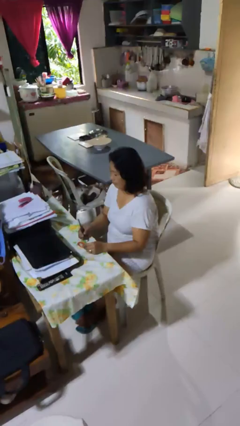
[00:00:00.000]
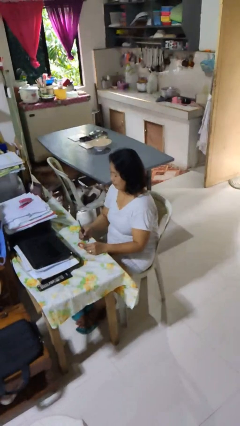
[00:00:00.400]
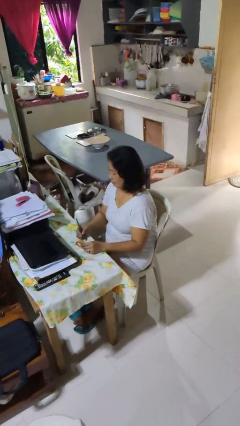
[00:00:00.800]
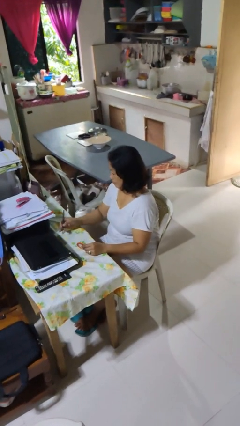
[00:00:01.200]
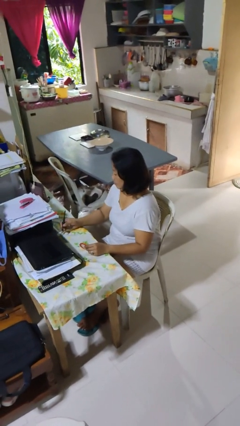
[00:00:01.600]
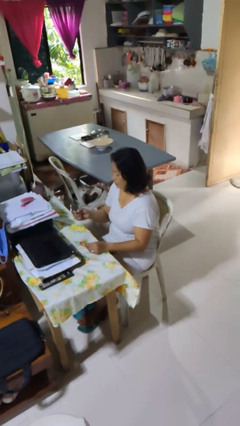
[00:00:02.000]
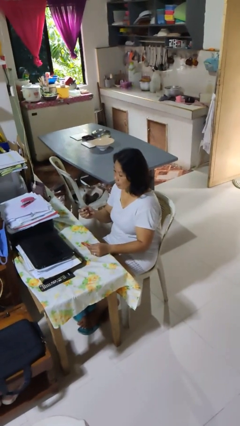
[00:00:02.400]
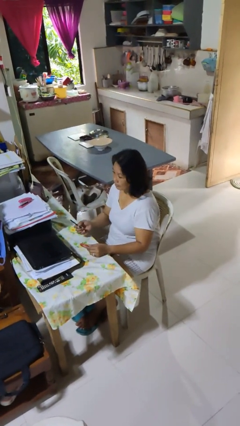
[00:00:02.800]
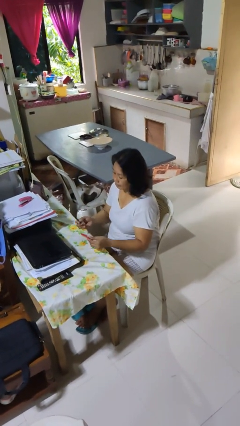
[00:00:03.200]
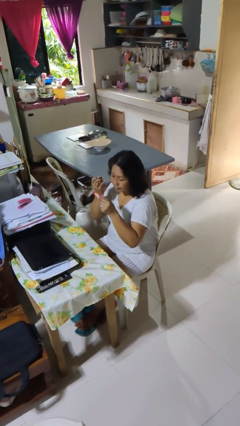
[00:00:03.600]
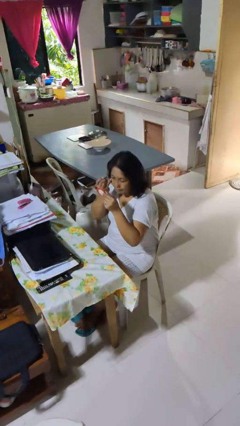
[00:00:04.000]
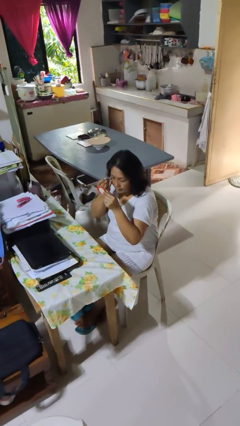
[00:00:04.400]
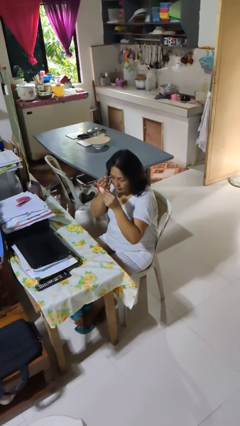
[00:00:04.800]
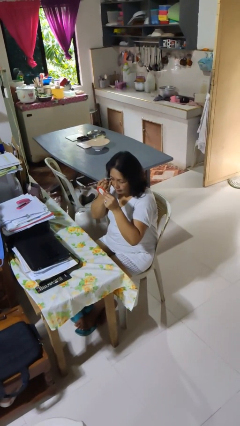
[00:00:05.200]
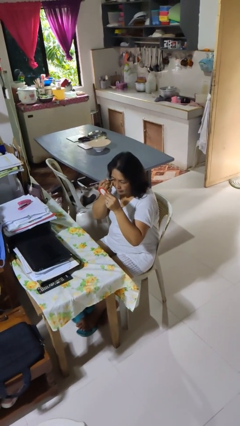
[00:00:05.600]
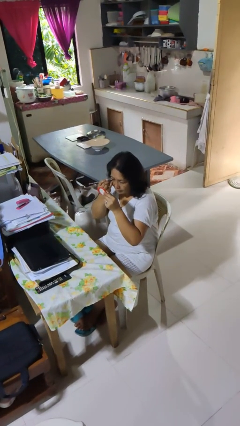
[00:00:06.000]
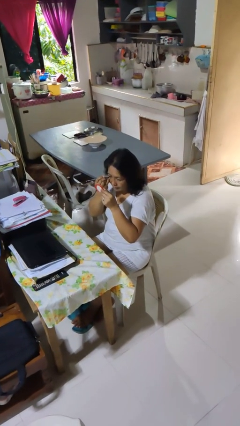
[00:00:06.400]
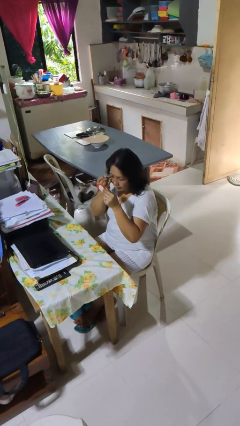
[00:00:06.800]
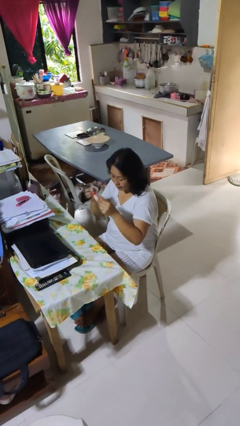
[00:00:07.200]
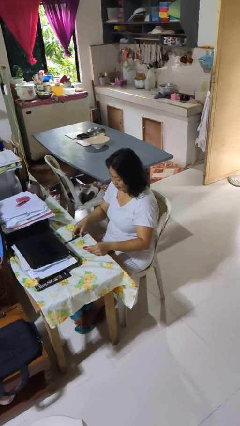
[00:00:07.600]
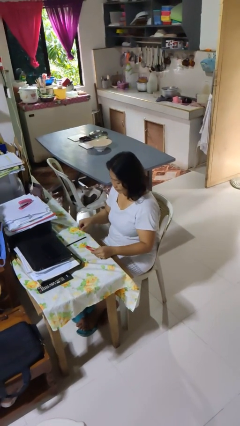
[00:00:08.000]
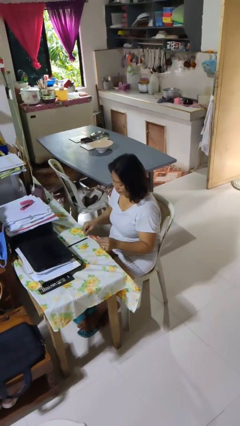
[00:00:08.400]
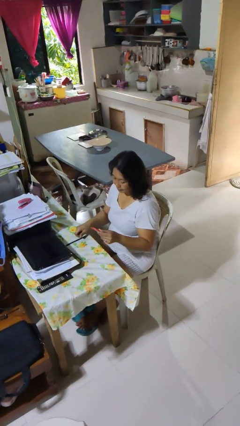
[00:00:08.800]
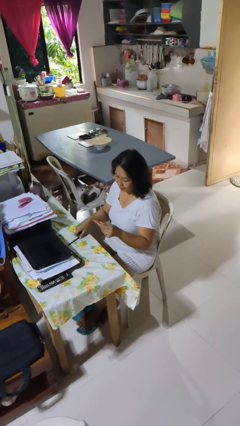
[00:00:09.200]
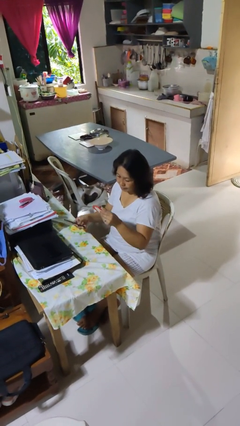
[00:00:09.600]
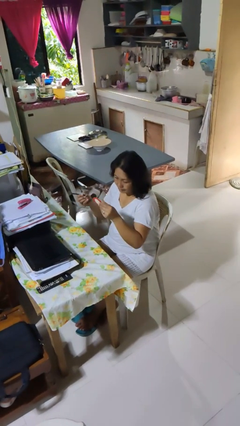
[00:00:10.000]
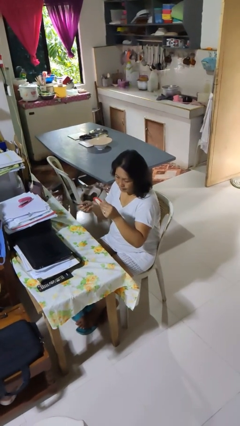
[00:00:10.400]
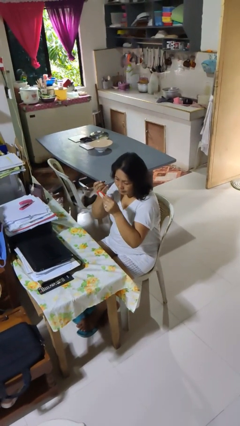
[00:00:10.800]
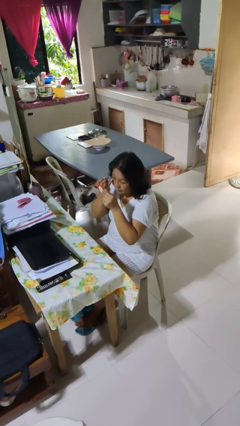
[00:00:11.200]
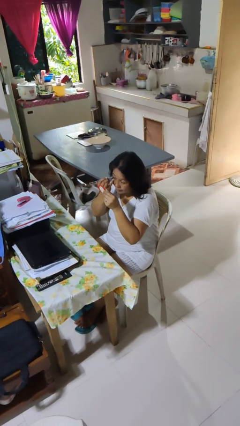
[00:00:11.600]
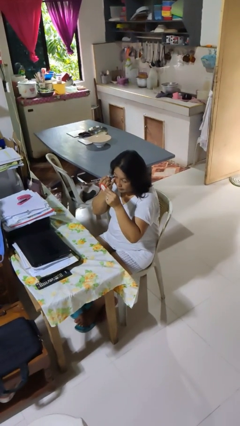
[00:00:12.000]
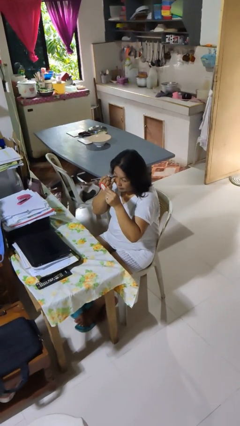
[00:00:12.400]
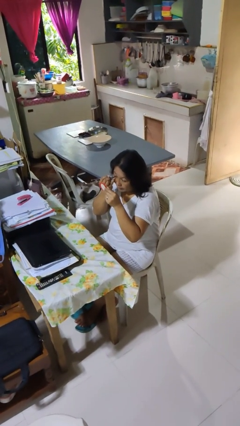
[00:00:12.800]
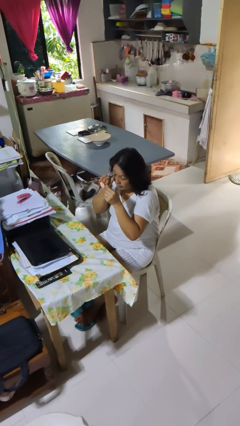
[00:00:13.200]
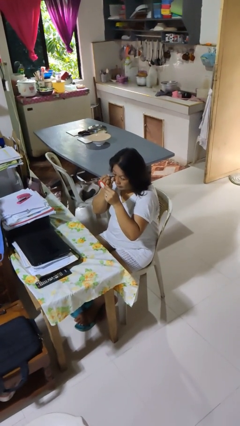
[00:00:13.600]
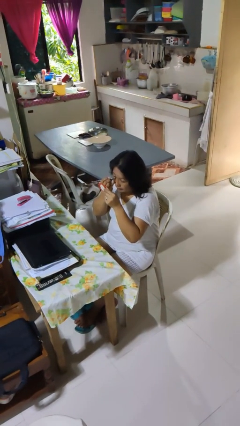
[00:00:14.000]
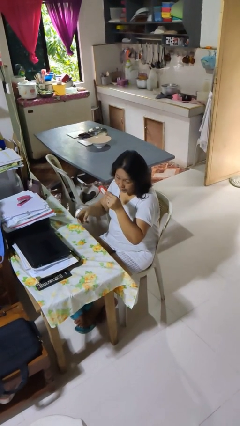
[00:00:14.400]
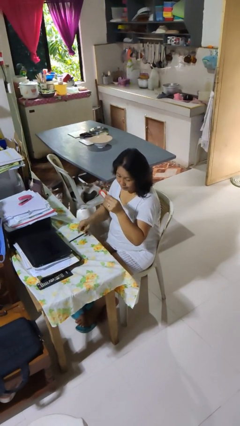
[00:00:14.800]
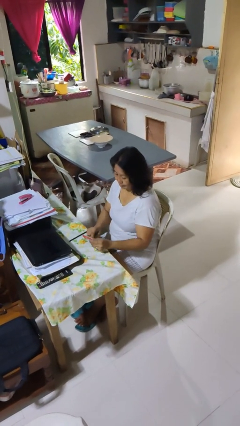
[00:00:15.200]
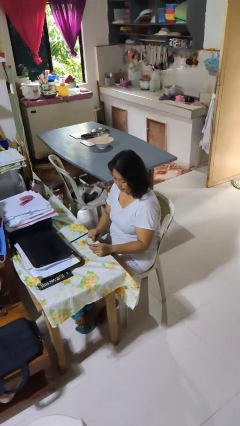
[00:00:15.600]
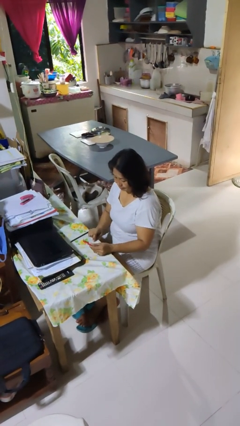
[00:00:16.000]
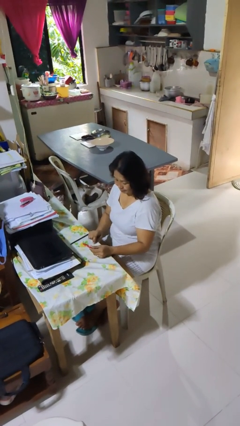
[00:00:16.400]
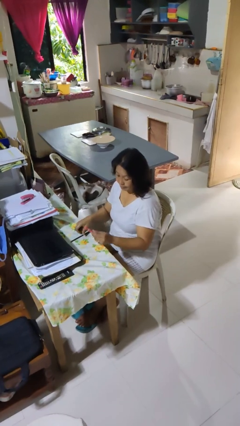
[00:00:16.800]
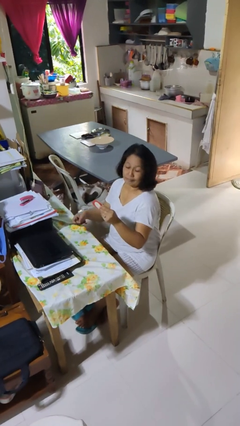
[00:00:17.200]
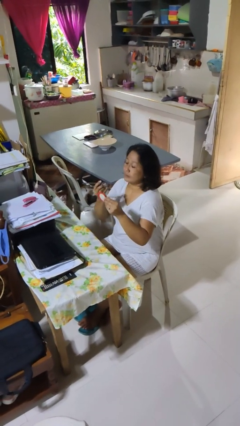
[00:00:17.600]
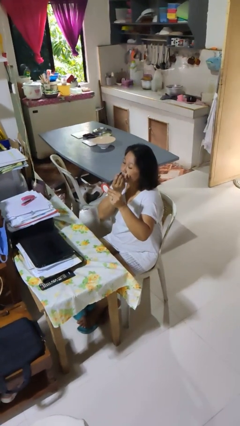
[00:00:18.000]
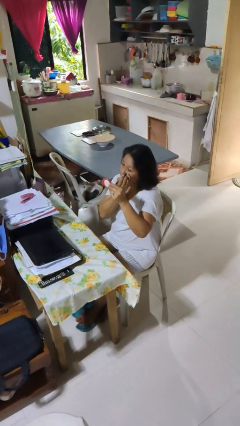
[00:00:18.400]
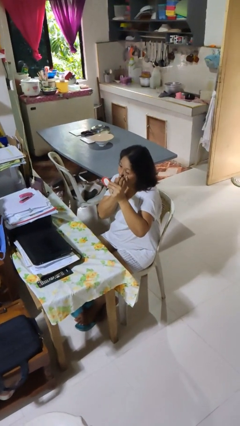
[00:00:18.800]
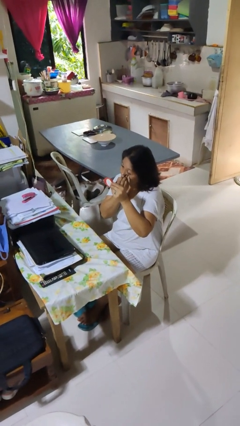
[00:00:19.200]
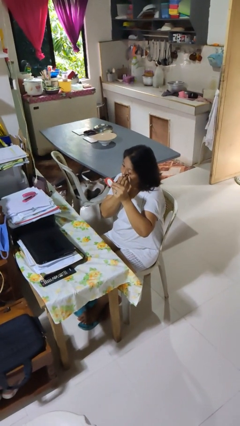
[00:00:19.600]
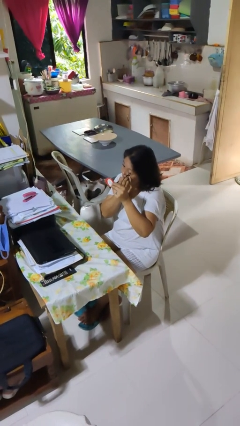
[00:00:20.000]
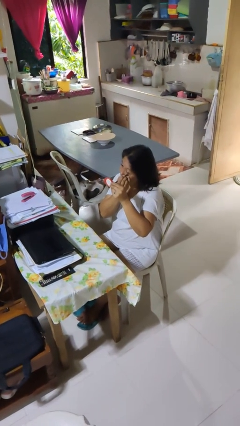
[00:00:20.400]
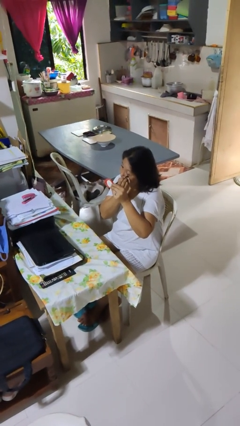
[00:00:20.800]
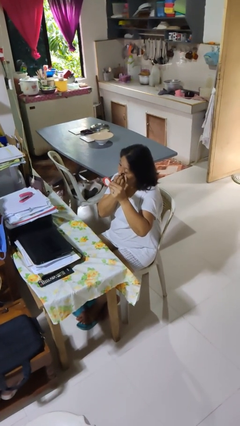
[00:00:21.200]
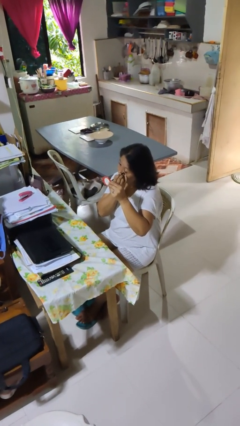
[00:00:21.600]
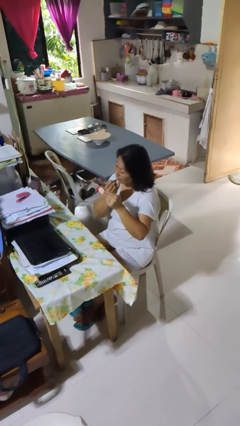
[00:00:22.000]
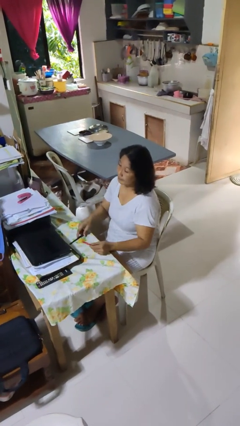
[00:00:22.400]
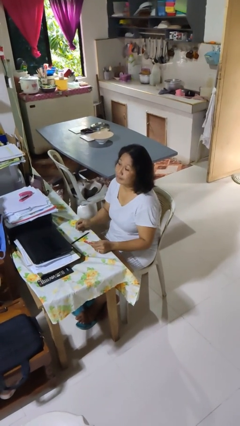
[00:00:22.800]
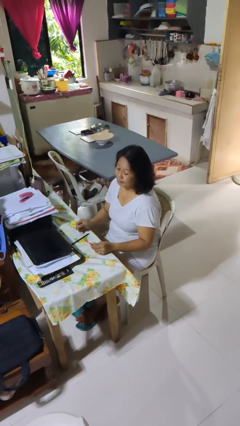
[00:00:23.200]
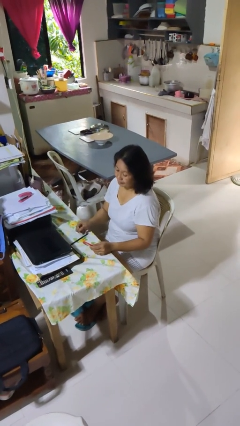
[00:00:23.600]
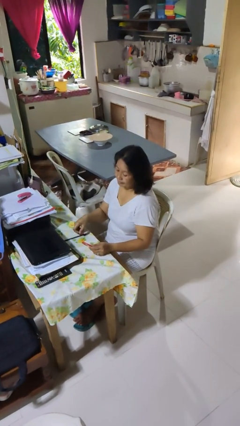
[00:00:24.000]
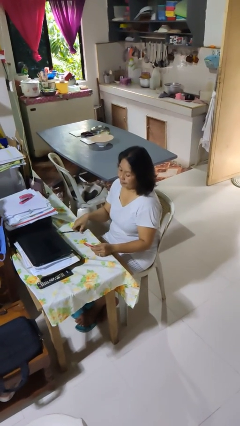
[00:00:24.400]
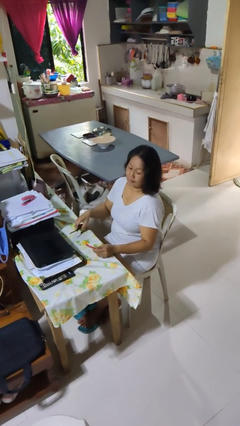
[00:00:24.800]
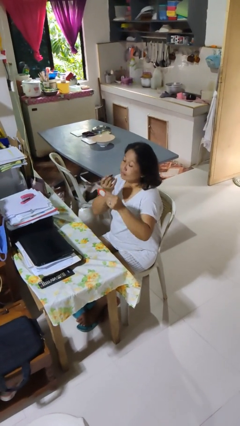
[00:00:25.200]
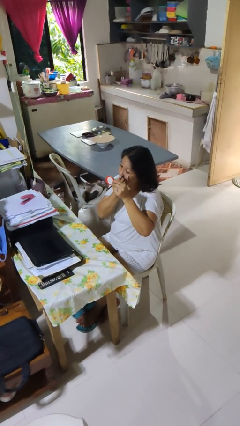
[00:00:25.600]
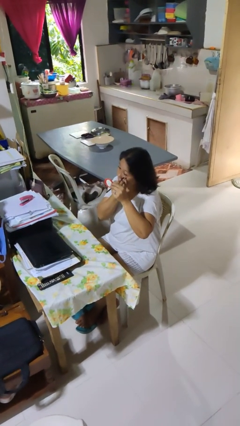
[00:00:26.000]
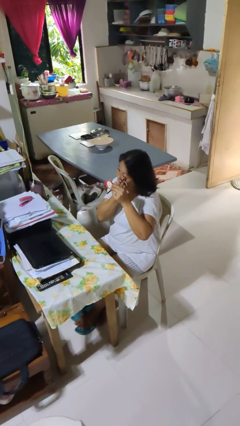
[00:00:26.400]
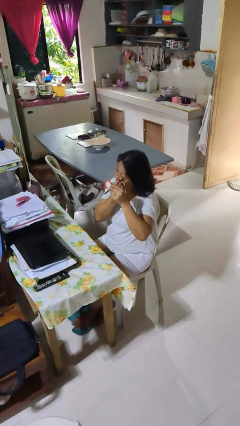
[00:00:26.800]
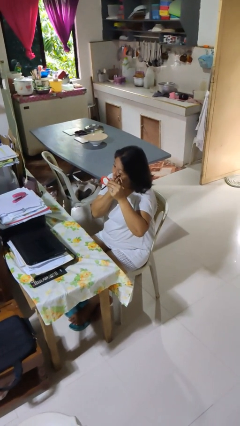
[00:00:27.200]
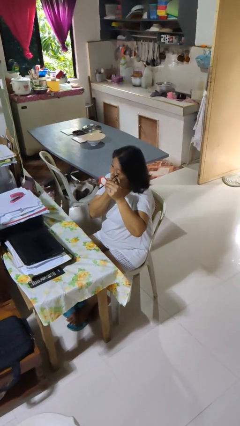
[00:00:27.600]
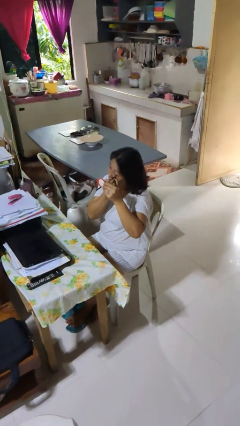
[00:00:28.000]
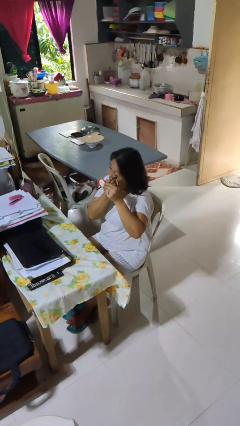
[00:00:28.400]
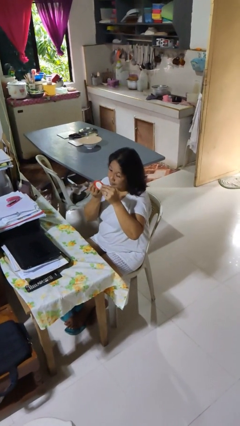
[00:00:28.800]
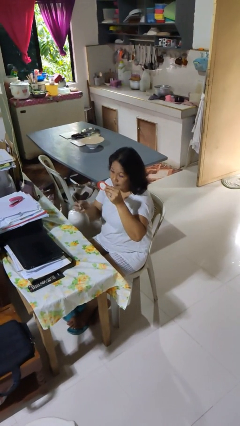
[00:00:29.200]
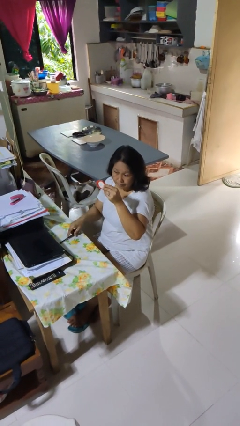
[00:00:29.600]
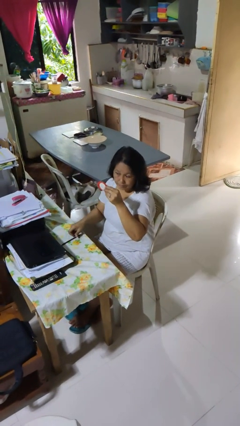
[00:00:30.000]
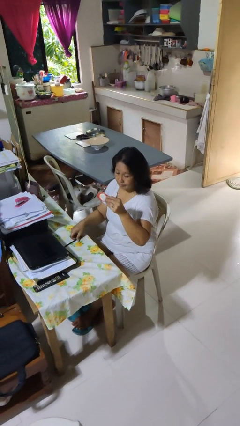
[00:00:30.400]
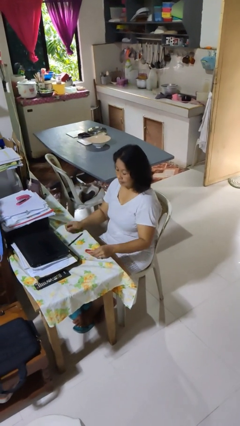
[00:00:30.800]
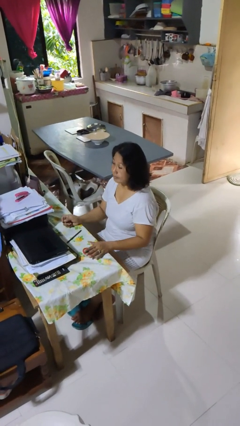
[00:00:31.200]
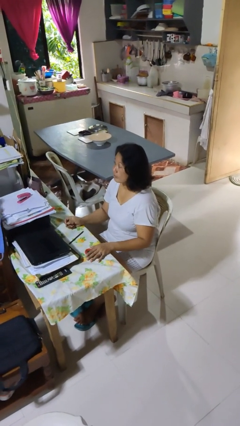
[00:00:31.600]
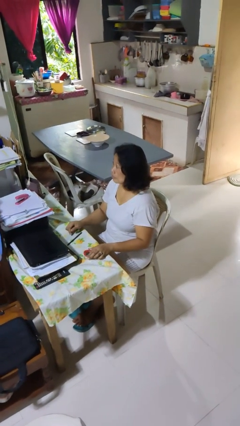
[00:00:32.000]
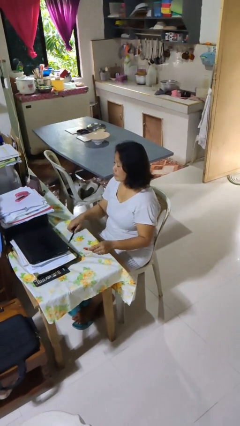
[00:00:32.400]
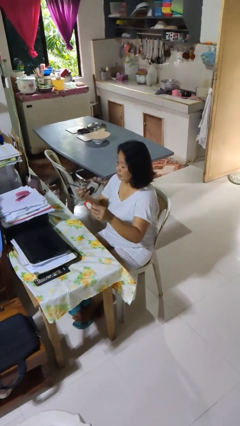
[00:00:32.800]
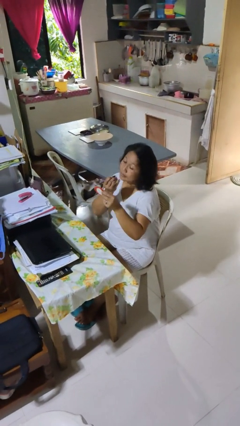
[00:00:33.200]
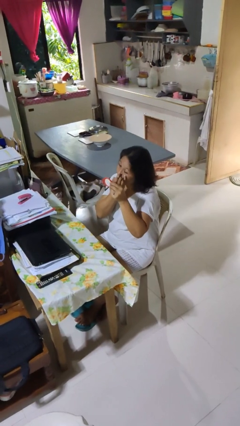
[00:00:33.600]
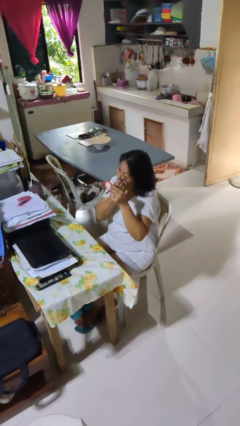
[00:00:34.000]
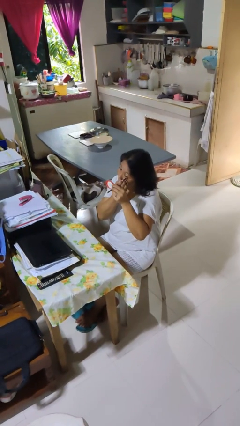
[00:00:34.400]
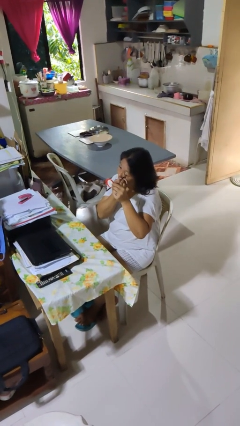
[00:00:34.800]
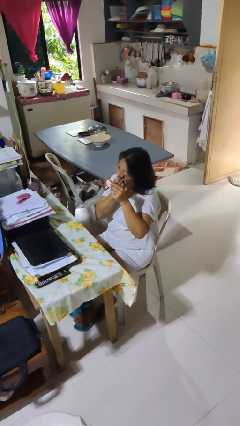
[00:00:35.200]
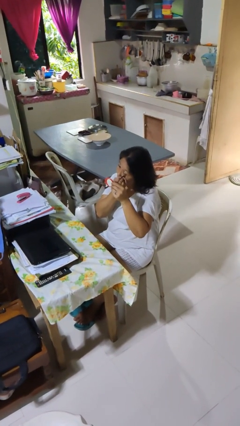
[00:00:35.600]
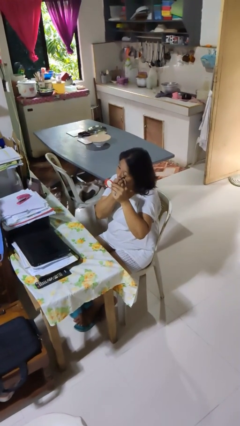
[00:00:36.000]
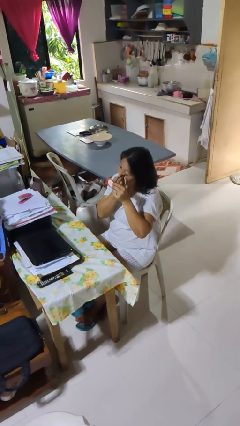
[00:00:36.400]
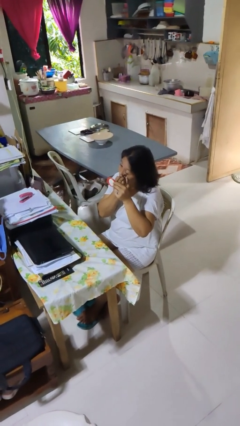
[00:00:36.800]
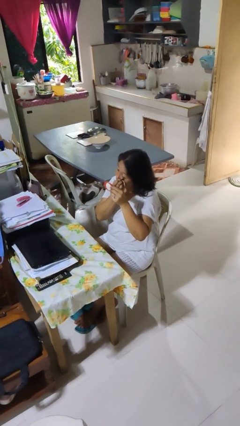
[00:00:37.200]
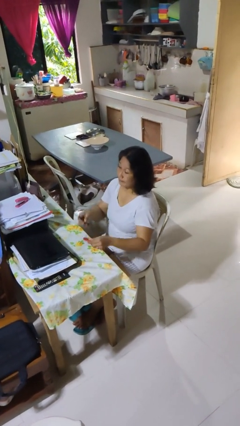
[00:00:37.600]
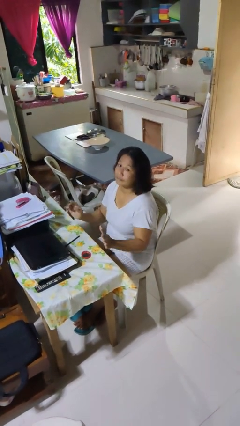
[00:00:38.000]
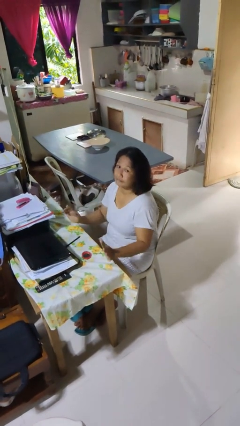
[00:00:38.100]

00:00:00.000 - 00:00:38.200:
person applies eye makeup
